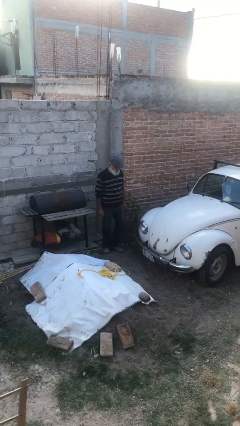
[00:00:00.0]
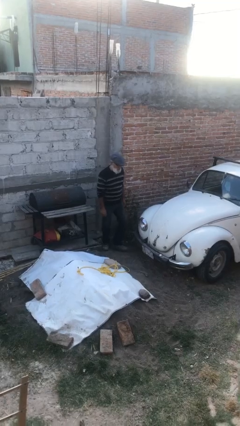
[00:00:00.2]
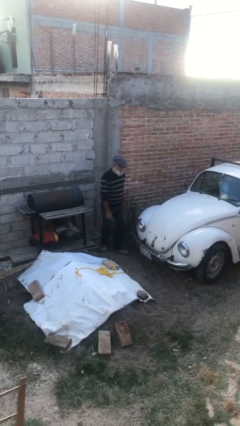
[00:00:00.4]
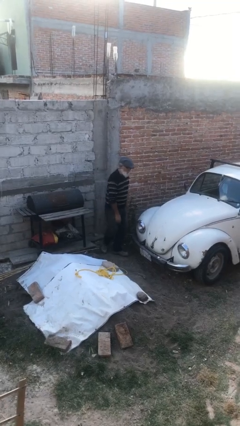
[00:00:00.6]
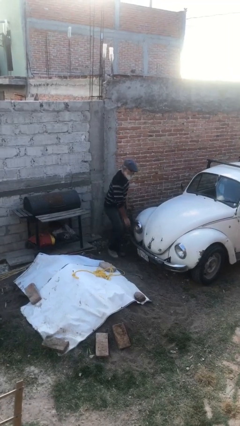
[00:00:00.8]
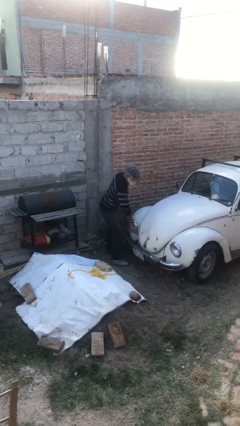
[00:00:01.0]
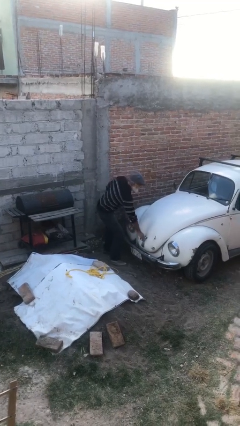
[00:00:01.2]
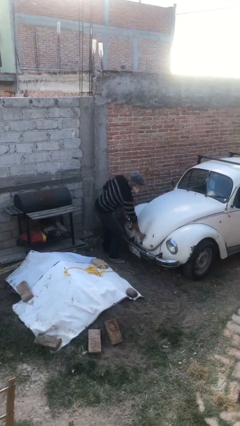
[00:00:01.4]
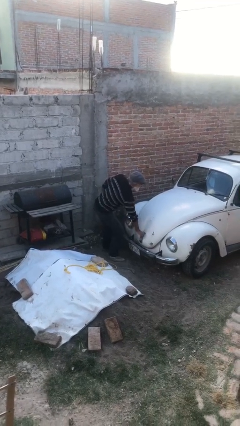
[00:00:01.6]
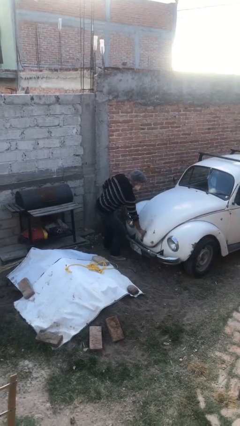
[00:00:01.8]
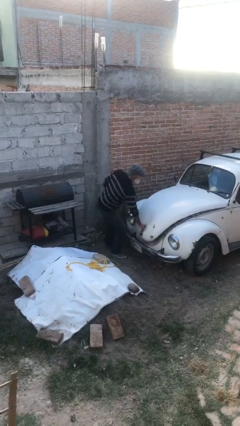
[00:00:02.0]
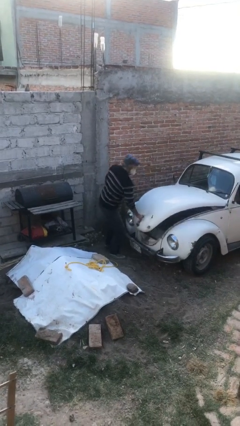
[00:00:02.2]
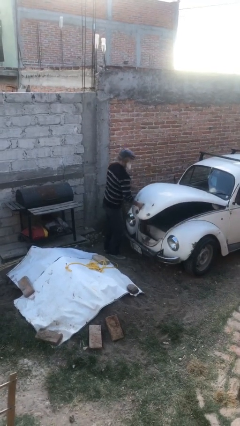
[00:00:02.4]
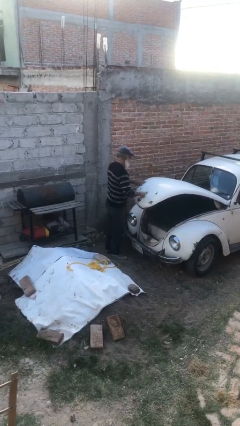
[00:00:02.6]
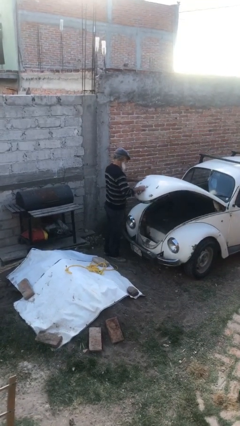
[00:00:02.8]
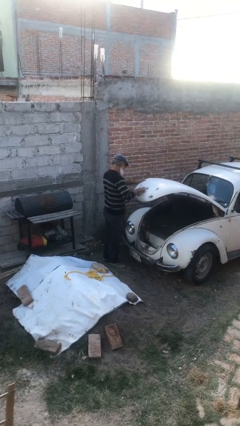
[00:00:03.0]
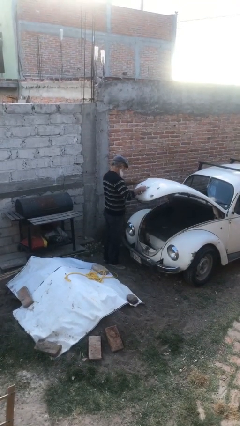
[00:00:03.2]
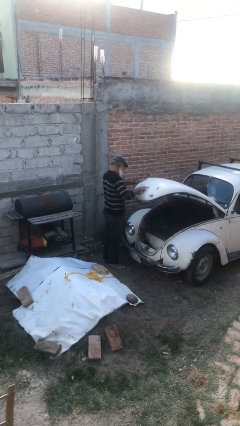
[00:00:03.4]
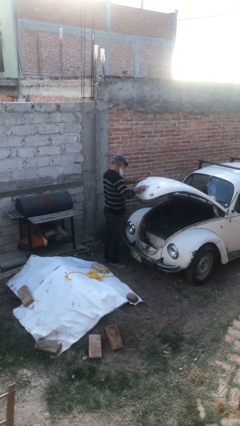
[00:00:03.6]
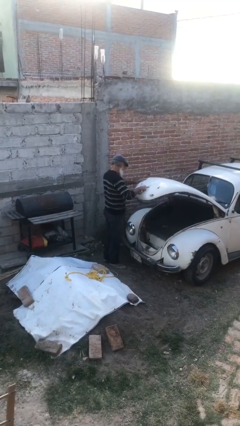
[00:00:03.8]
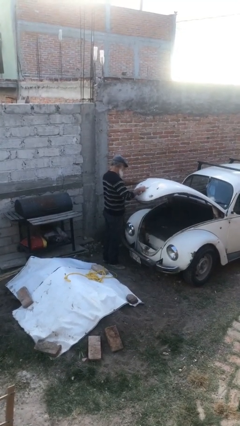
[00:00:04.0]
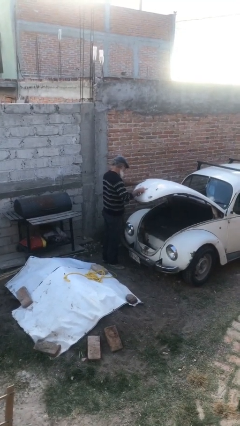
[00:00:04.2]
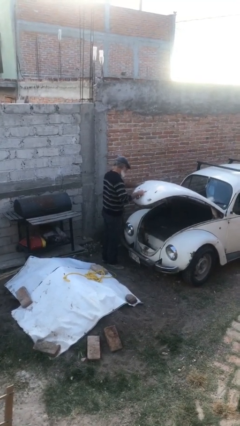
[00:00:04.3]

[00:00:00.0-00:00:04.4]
person opens car trunk

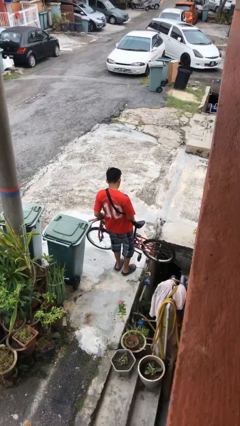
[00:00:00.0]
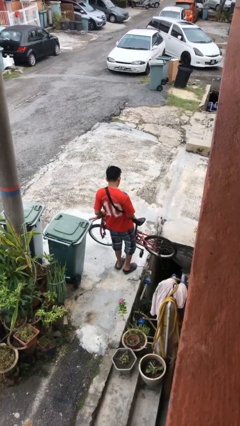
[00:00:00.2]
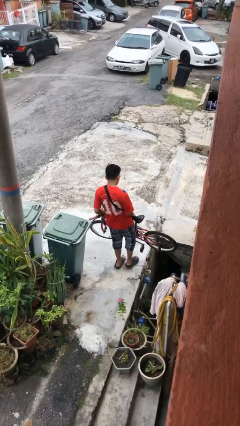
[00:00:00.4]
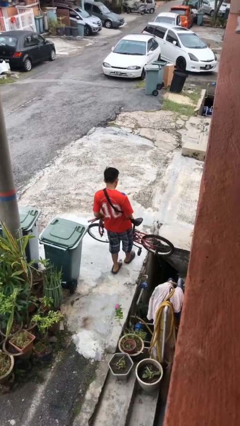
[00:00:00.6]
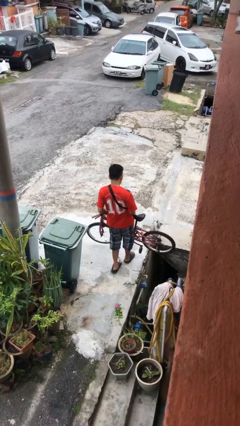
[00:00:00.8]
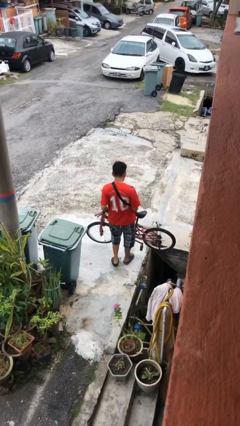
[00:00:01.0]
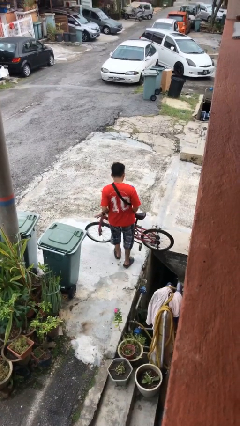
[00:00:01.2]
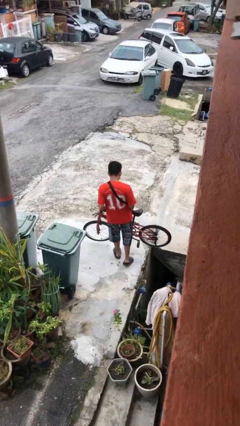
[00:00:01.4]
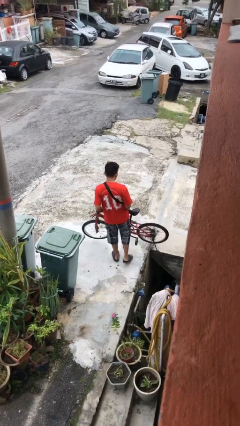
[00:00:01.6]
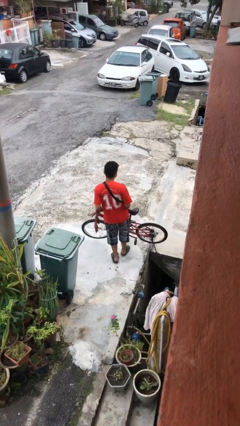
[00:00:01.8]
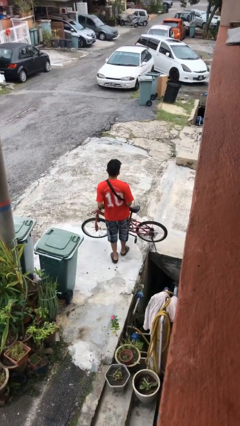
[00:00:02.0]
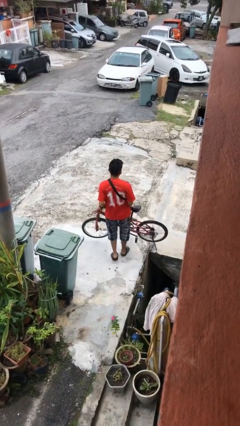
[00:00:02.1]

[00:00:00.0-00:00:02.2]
person carries bicycle

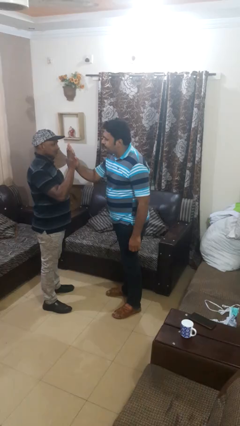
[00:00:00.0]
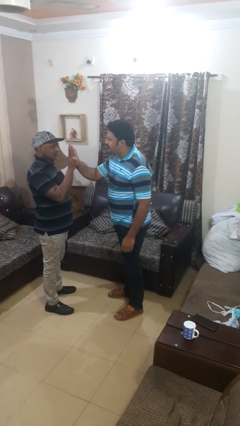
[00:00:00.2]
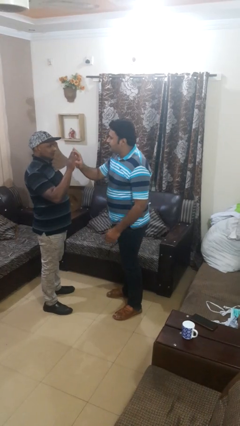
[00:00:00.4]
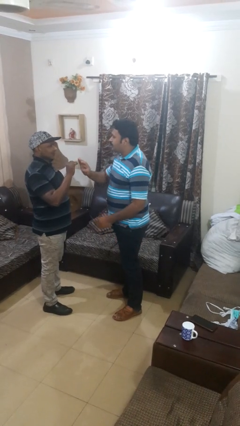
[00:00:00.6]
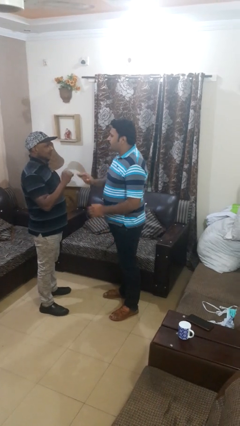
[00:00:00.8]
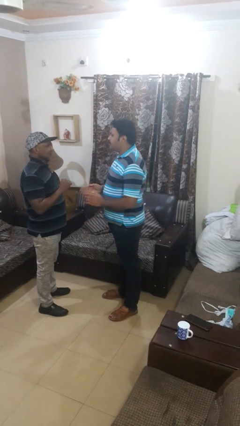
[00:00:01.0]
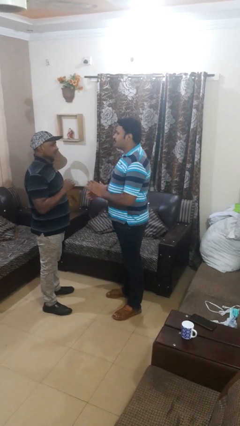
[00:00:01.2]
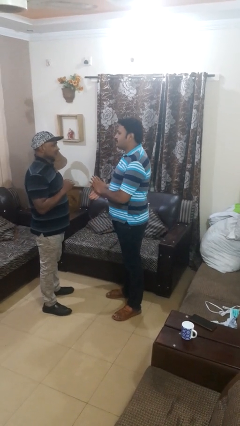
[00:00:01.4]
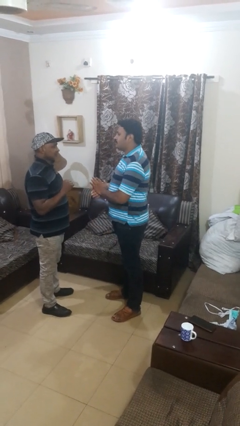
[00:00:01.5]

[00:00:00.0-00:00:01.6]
person highfives hand

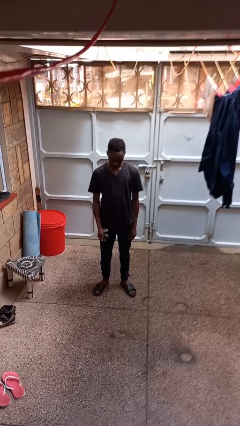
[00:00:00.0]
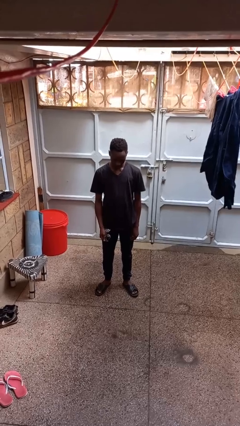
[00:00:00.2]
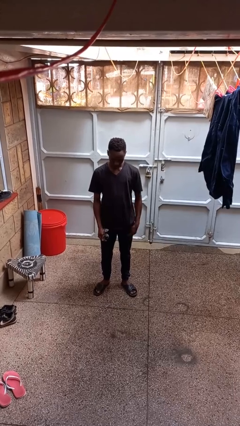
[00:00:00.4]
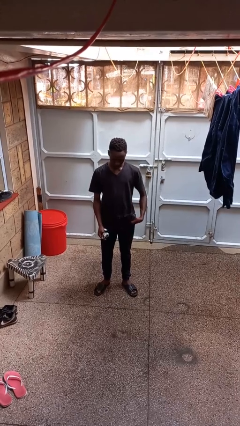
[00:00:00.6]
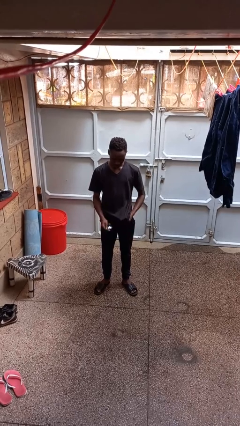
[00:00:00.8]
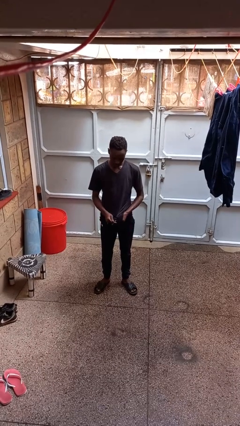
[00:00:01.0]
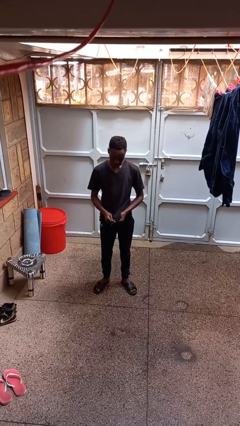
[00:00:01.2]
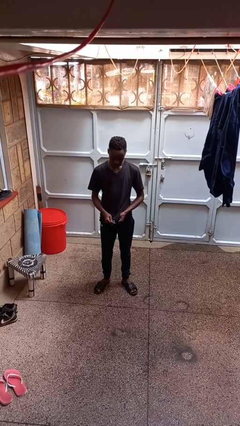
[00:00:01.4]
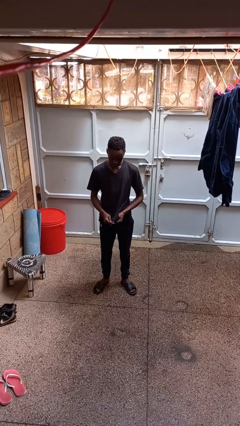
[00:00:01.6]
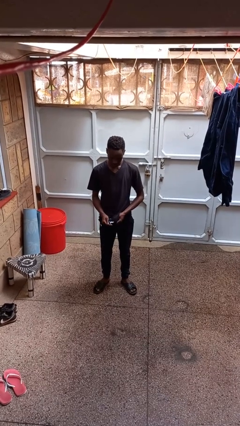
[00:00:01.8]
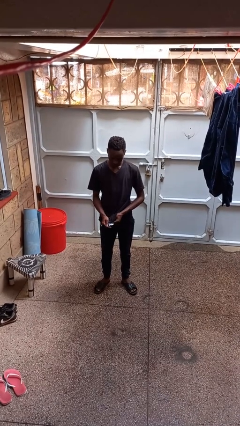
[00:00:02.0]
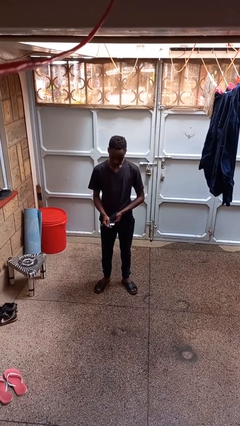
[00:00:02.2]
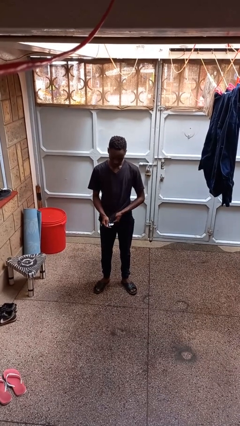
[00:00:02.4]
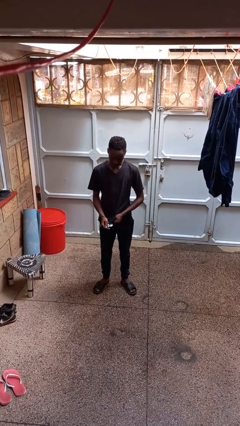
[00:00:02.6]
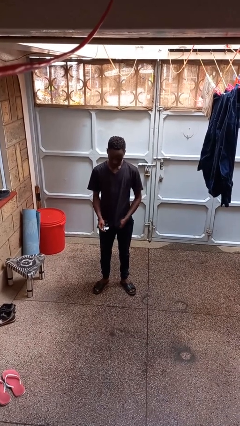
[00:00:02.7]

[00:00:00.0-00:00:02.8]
person cleans eyeglasses

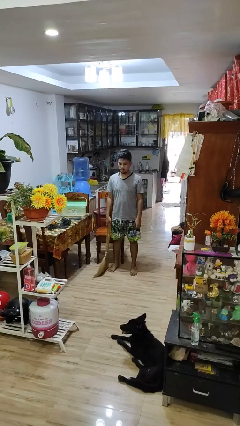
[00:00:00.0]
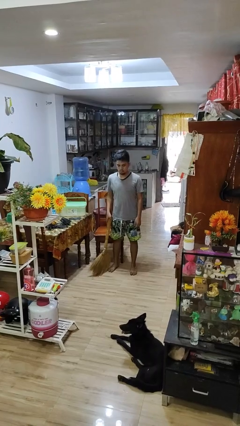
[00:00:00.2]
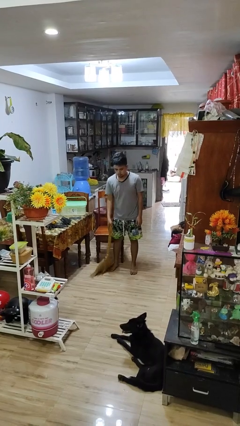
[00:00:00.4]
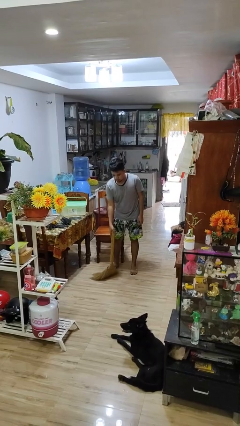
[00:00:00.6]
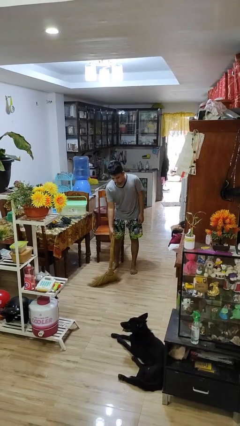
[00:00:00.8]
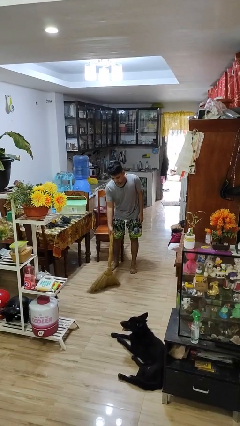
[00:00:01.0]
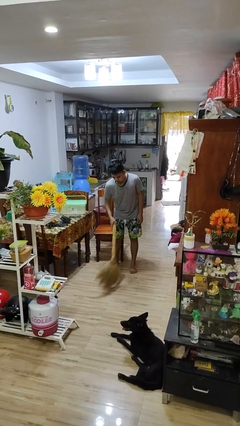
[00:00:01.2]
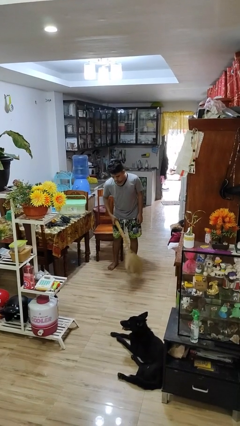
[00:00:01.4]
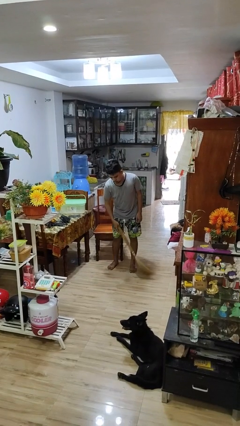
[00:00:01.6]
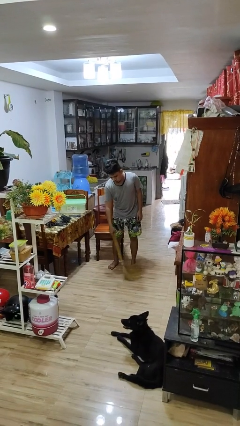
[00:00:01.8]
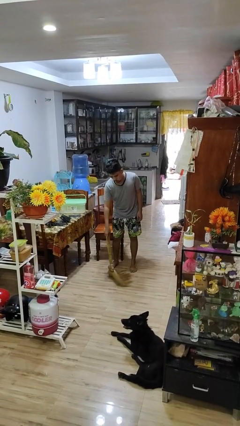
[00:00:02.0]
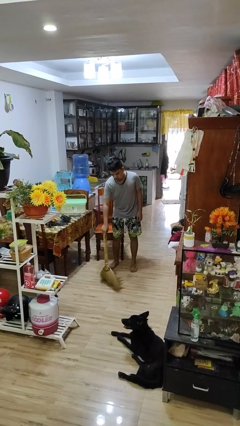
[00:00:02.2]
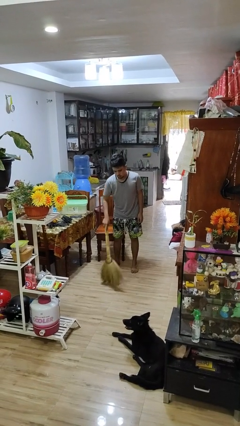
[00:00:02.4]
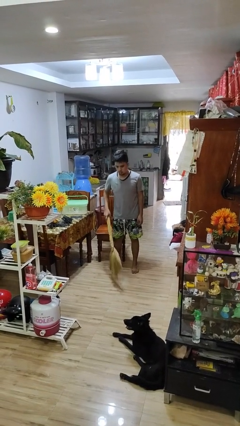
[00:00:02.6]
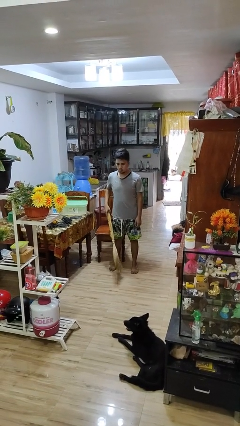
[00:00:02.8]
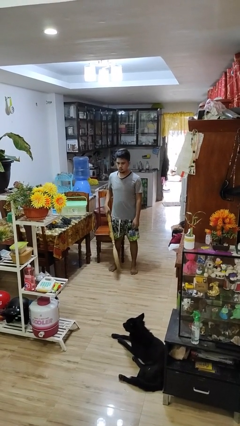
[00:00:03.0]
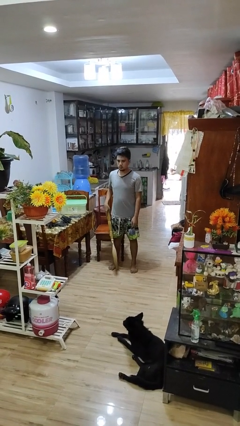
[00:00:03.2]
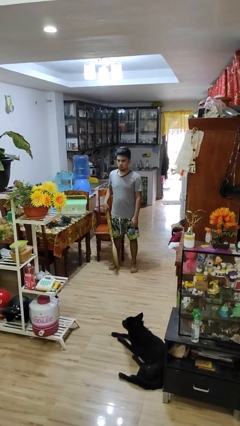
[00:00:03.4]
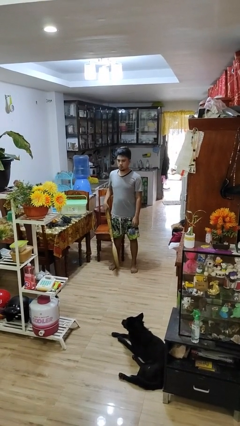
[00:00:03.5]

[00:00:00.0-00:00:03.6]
person sweeps floor

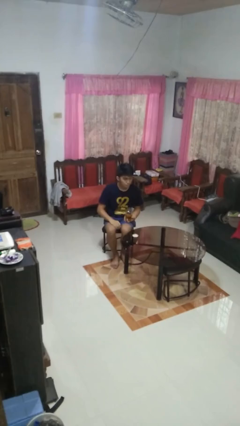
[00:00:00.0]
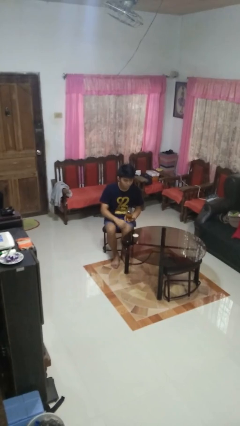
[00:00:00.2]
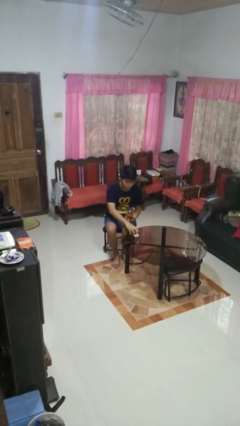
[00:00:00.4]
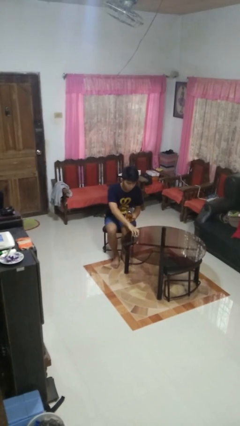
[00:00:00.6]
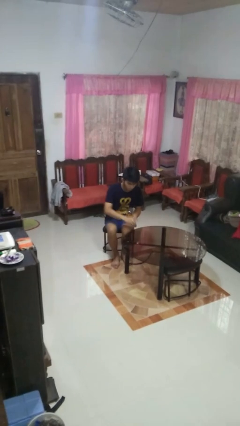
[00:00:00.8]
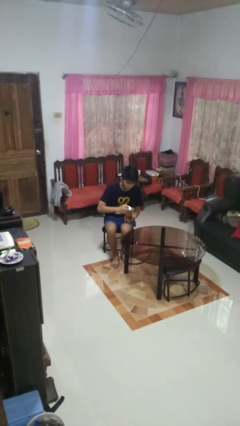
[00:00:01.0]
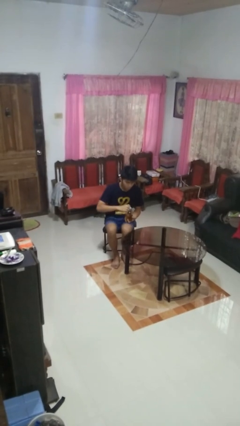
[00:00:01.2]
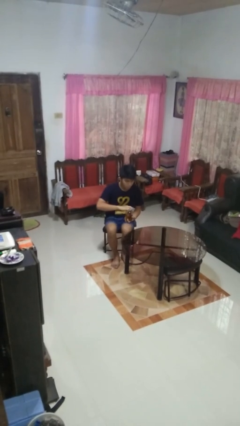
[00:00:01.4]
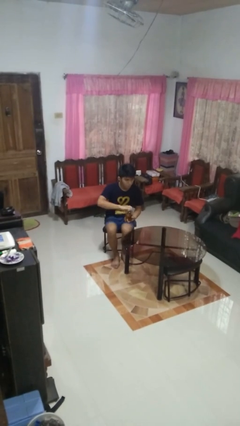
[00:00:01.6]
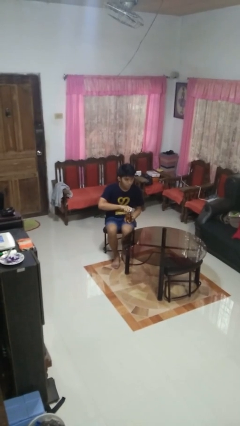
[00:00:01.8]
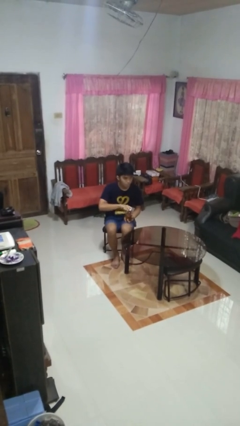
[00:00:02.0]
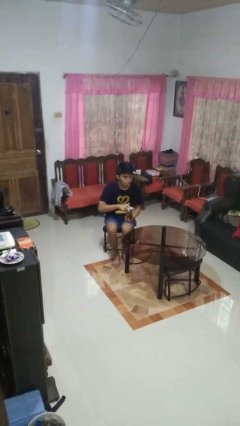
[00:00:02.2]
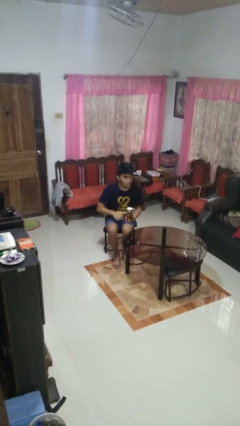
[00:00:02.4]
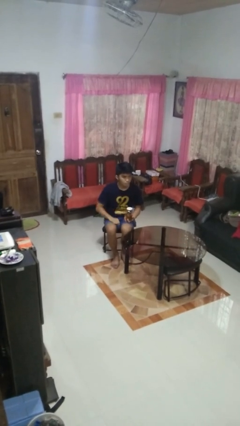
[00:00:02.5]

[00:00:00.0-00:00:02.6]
person closes jar
